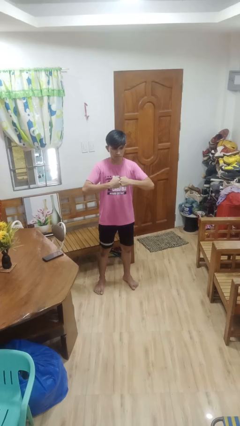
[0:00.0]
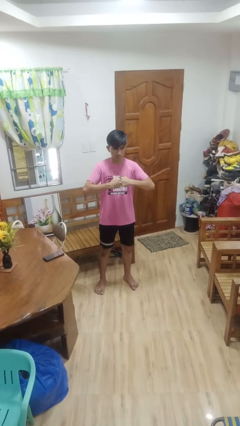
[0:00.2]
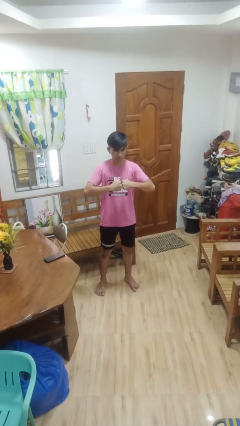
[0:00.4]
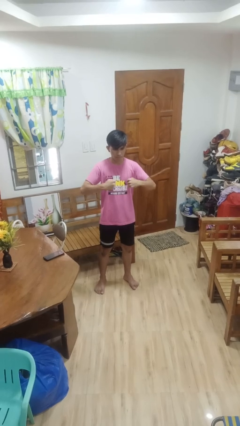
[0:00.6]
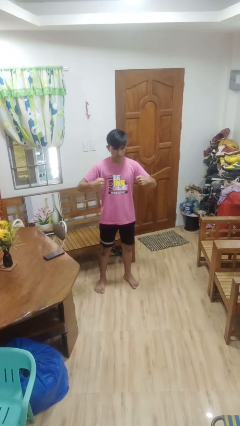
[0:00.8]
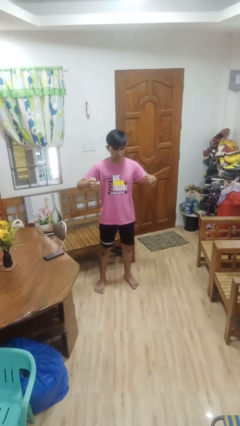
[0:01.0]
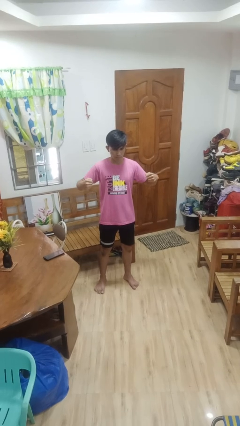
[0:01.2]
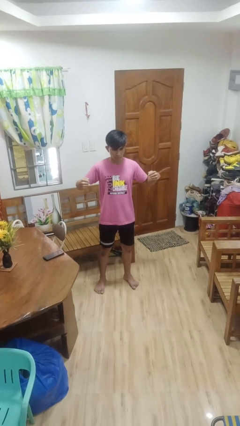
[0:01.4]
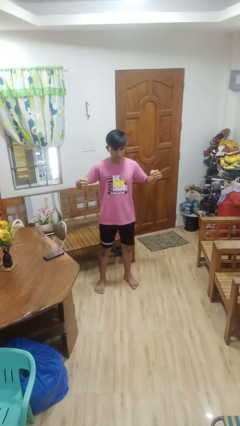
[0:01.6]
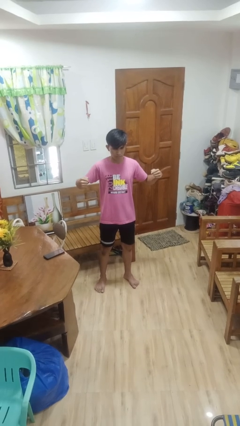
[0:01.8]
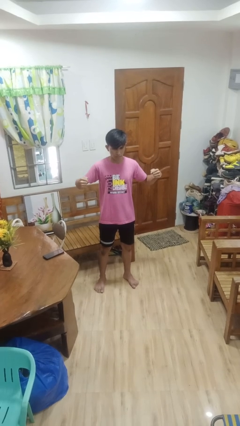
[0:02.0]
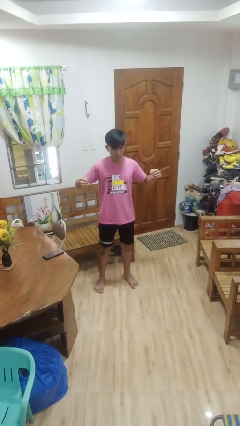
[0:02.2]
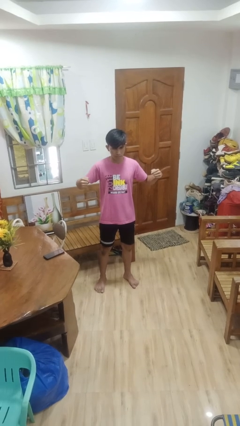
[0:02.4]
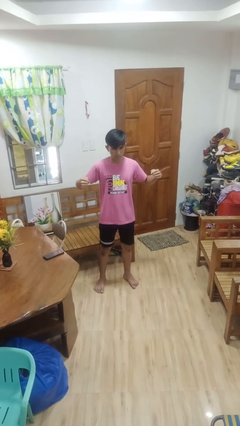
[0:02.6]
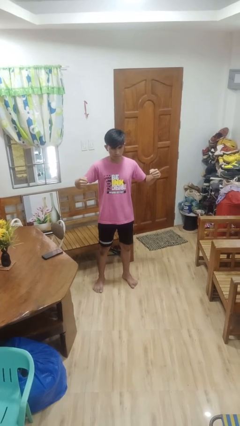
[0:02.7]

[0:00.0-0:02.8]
person gestures zoom in

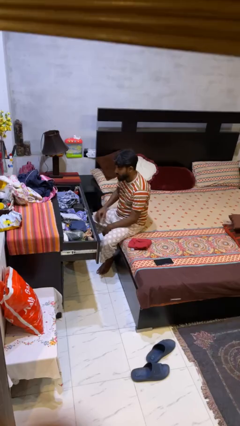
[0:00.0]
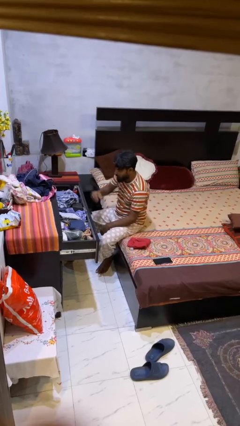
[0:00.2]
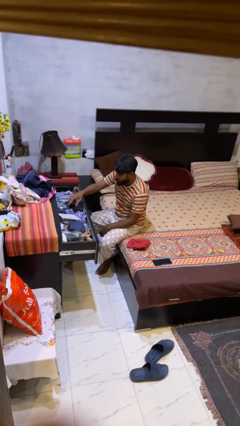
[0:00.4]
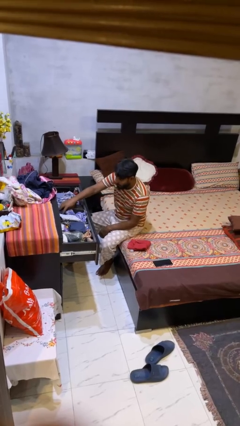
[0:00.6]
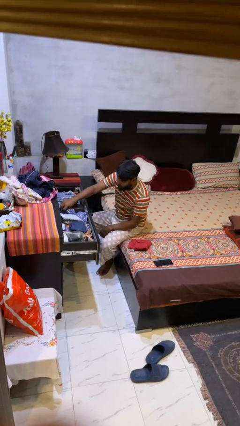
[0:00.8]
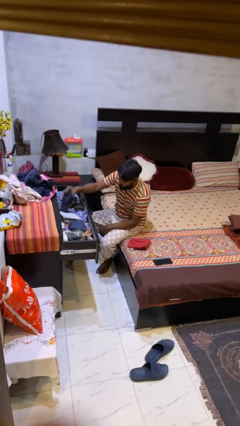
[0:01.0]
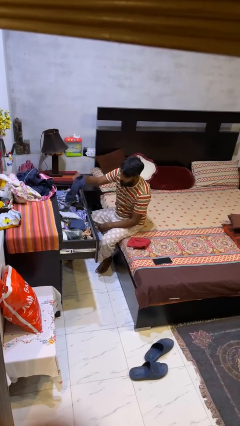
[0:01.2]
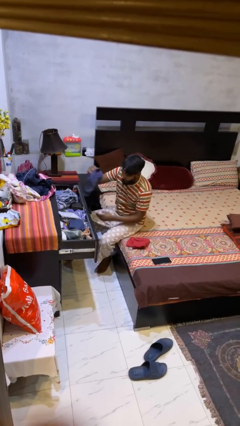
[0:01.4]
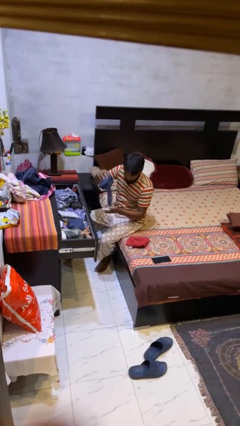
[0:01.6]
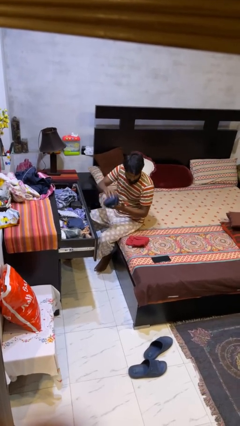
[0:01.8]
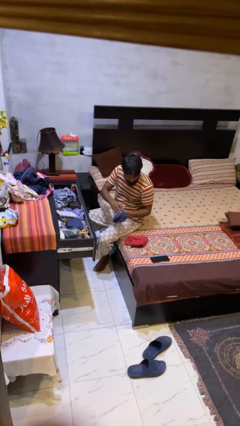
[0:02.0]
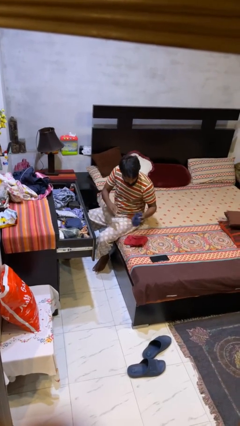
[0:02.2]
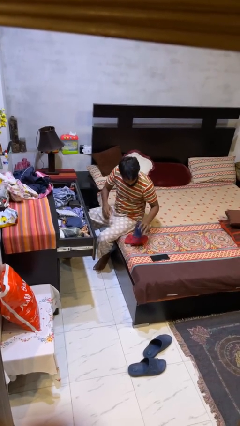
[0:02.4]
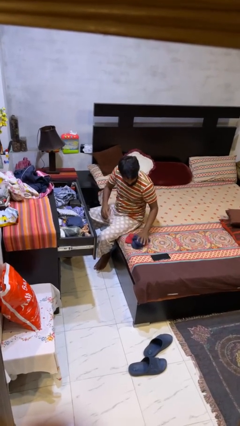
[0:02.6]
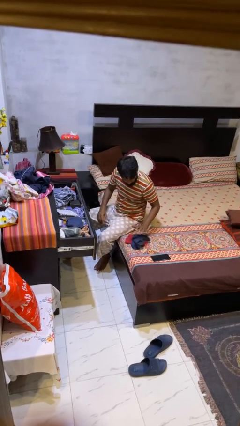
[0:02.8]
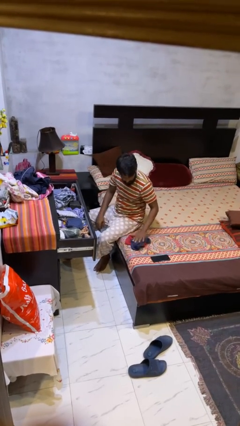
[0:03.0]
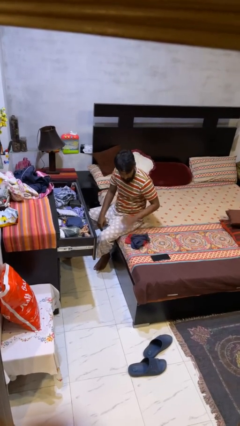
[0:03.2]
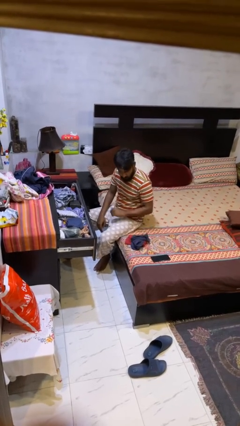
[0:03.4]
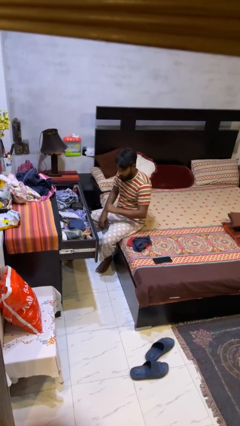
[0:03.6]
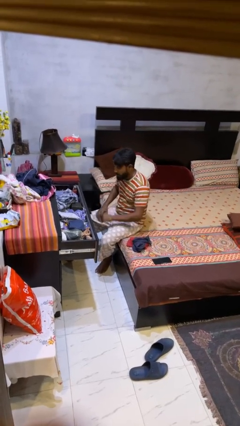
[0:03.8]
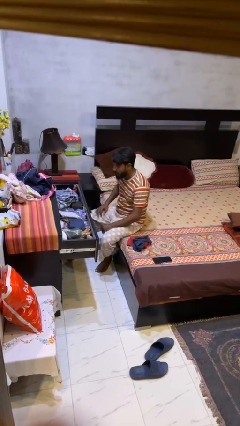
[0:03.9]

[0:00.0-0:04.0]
person takes clothes from dresser

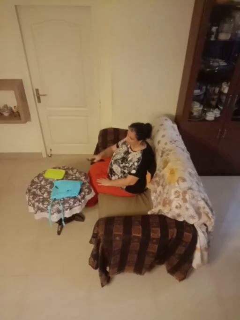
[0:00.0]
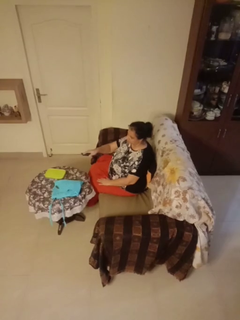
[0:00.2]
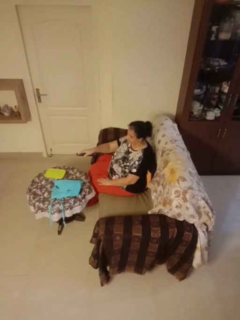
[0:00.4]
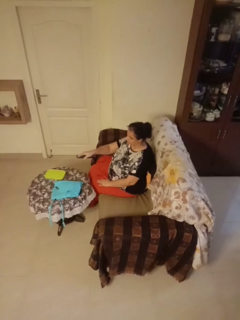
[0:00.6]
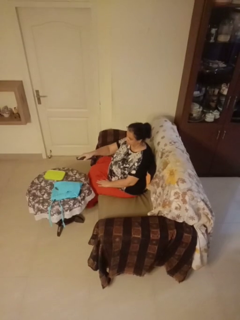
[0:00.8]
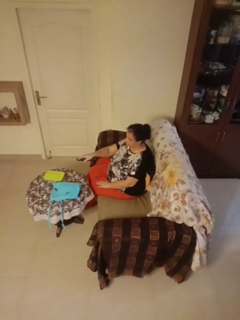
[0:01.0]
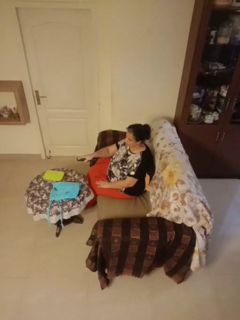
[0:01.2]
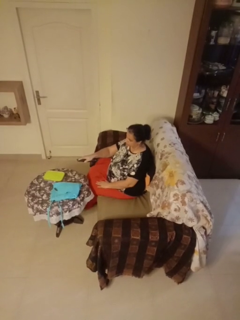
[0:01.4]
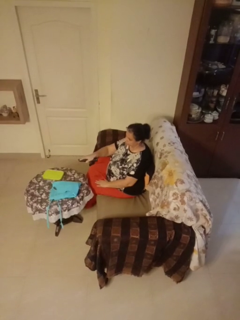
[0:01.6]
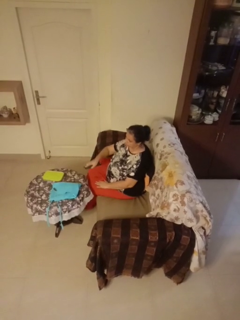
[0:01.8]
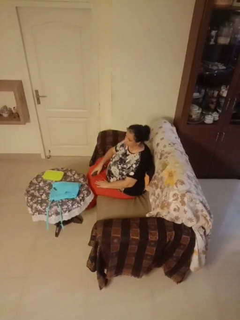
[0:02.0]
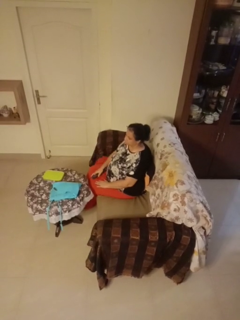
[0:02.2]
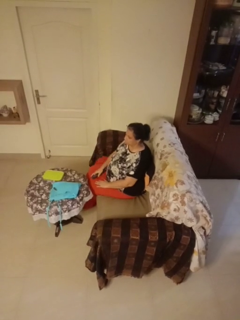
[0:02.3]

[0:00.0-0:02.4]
person uses television remote

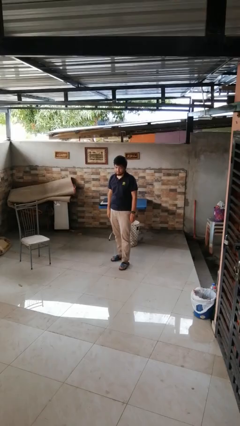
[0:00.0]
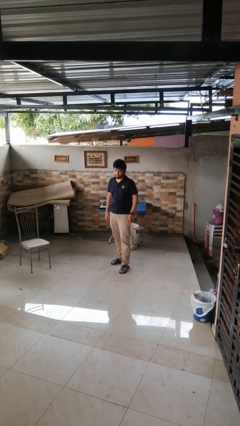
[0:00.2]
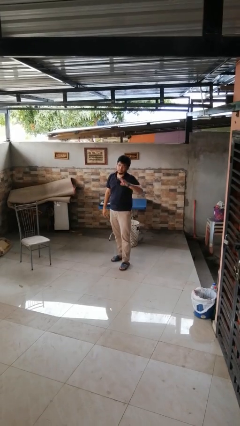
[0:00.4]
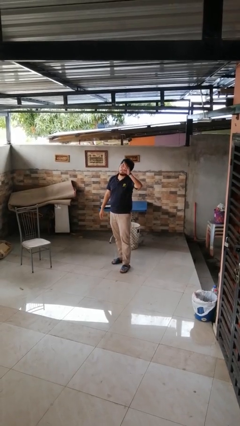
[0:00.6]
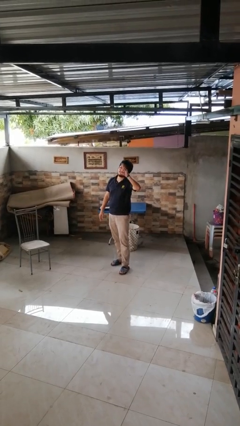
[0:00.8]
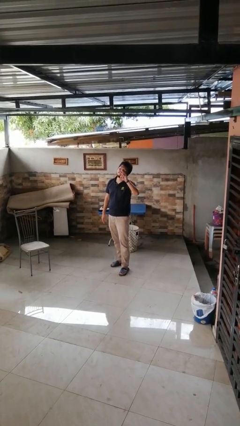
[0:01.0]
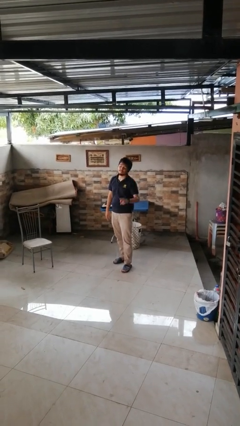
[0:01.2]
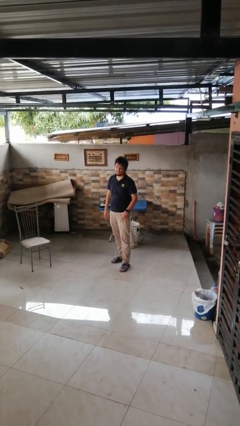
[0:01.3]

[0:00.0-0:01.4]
person gestures peace

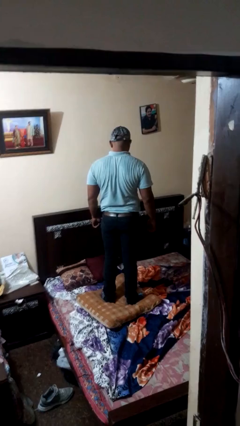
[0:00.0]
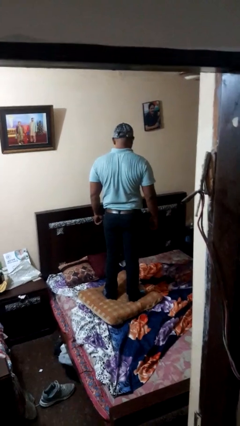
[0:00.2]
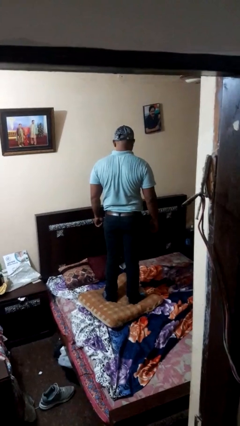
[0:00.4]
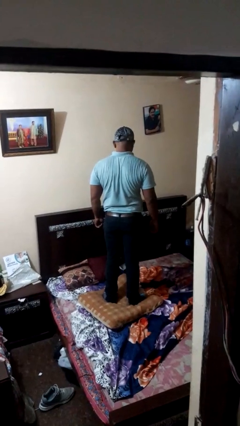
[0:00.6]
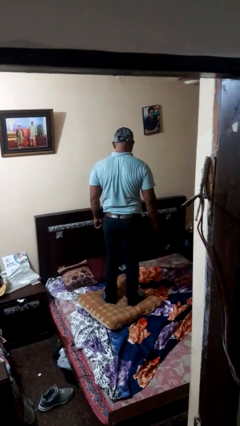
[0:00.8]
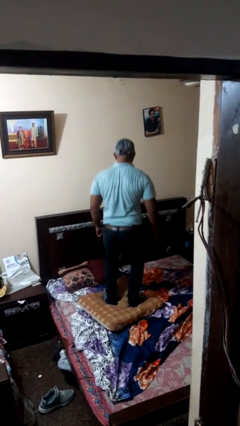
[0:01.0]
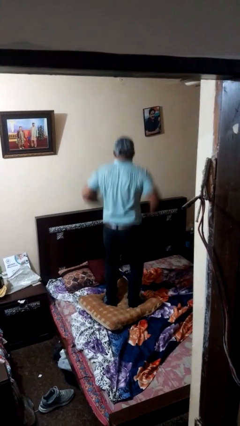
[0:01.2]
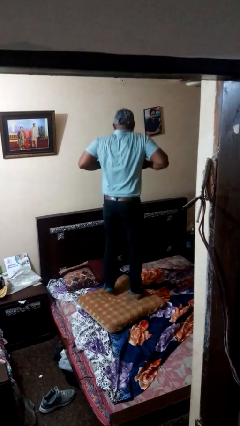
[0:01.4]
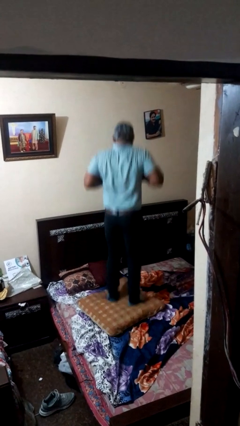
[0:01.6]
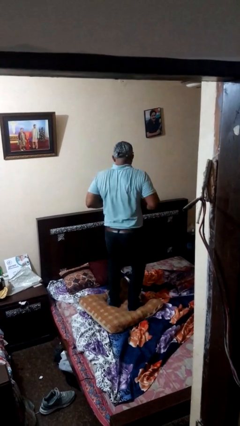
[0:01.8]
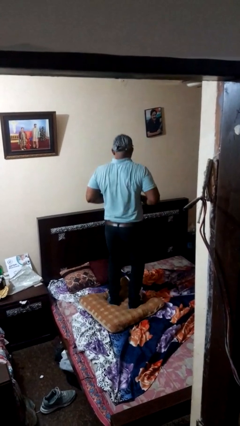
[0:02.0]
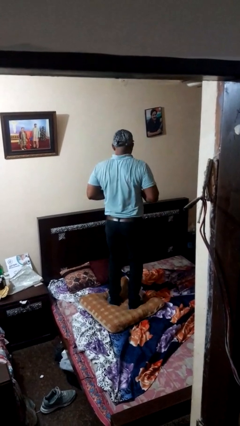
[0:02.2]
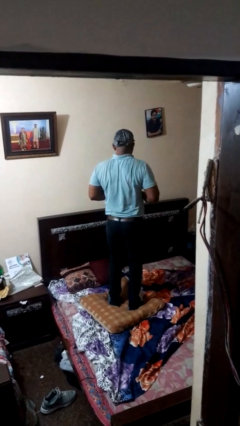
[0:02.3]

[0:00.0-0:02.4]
person jumps on bed

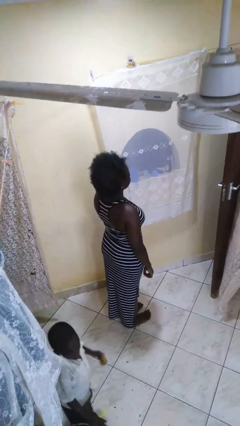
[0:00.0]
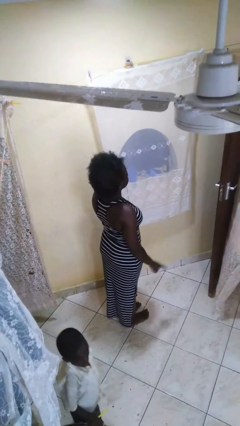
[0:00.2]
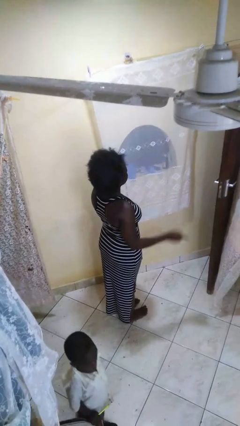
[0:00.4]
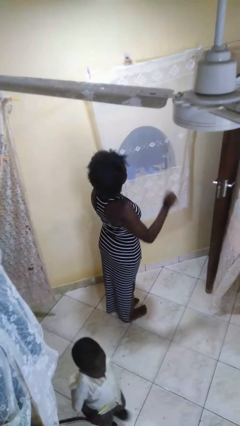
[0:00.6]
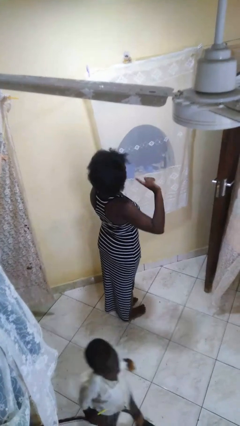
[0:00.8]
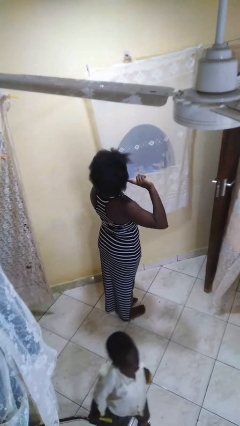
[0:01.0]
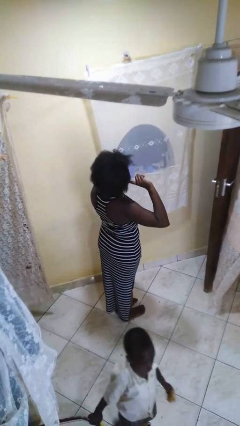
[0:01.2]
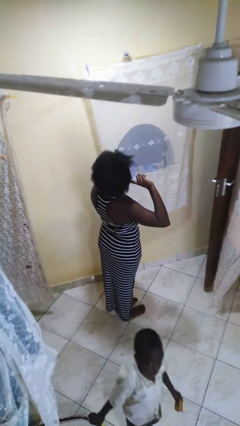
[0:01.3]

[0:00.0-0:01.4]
person gestures listen closely

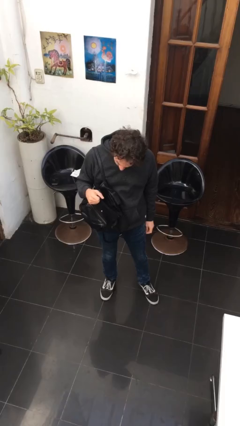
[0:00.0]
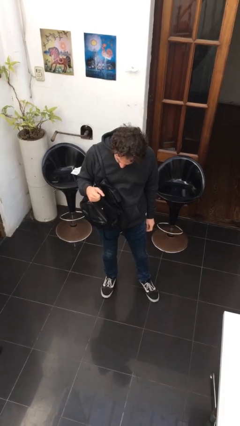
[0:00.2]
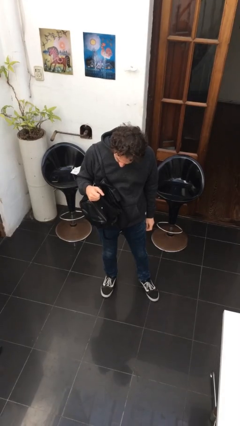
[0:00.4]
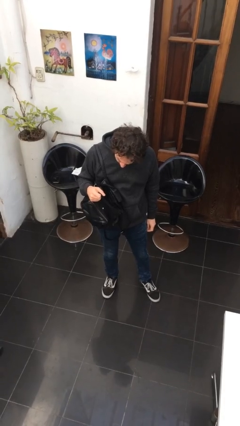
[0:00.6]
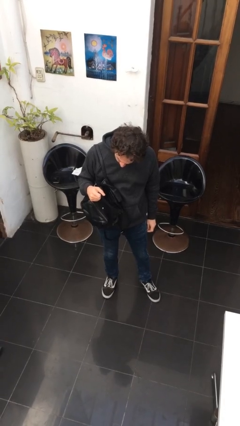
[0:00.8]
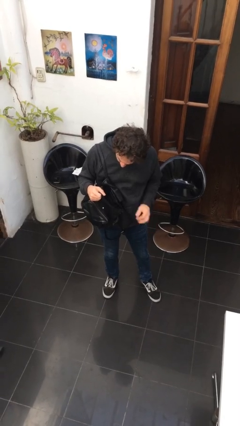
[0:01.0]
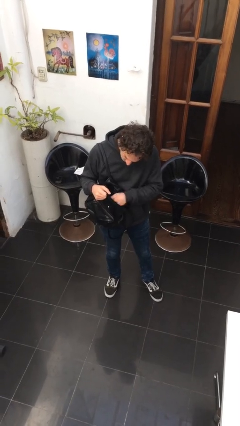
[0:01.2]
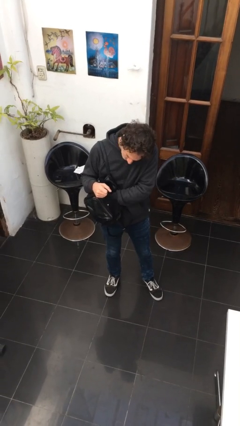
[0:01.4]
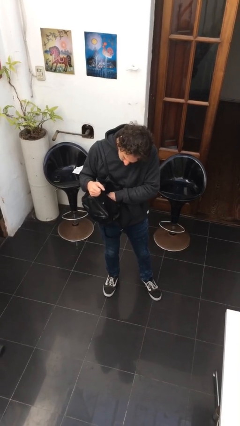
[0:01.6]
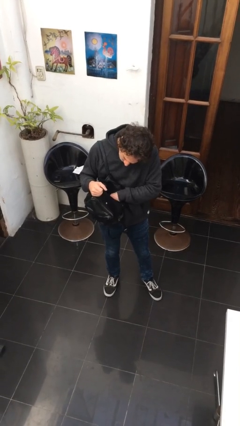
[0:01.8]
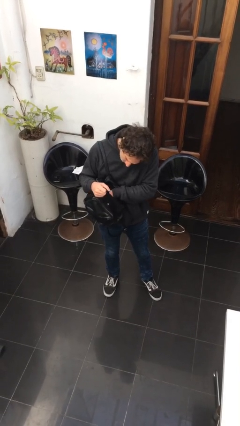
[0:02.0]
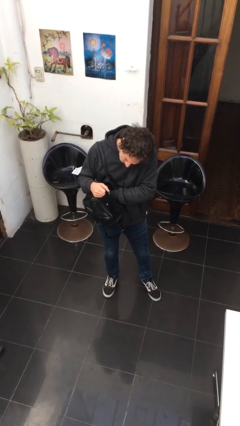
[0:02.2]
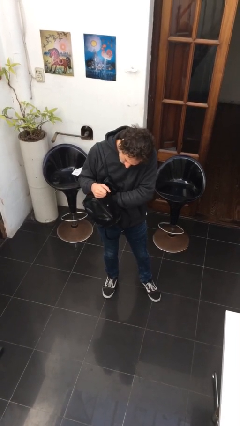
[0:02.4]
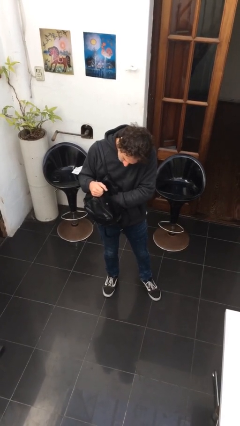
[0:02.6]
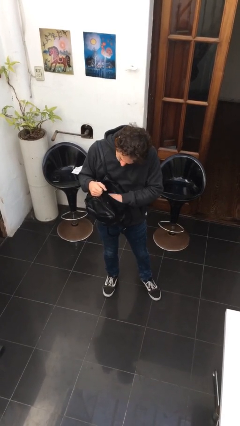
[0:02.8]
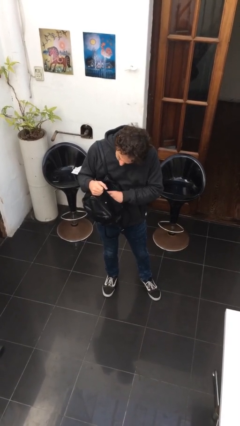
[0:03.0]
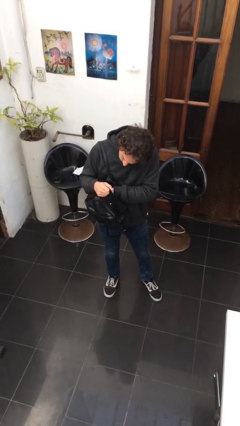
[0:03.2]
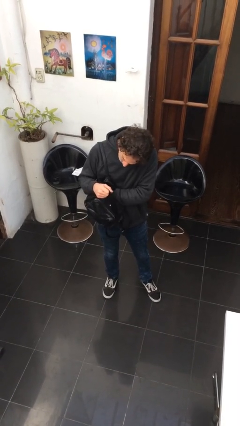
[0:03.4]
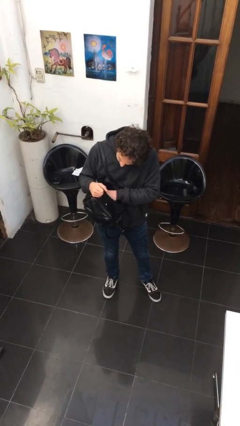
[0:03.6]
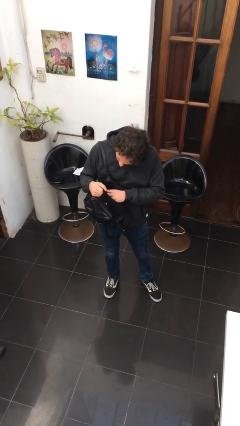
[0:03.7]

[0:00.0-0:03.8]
person searches in purse

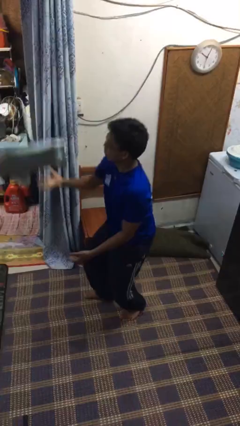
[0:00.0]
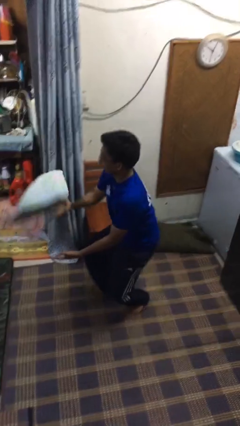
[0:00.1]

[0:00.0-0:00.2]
person drops object
